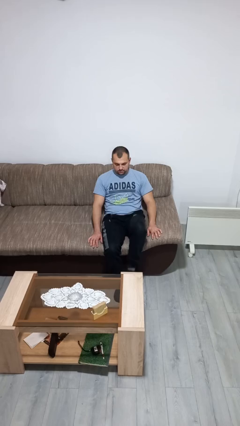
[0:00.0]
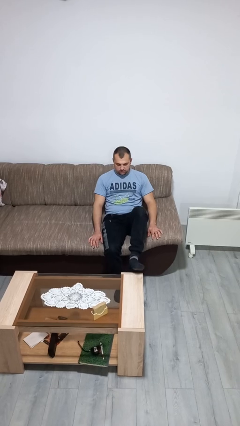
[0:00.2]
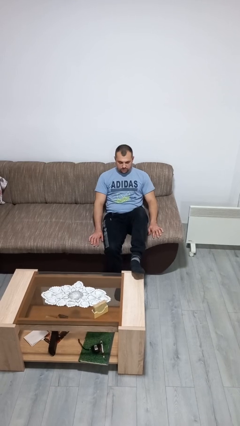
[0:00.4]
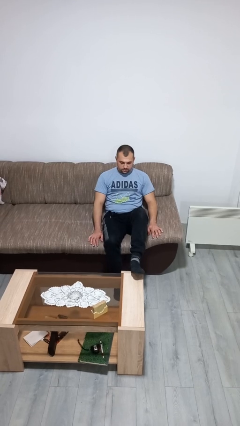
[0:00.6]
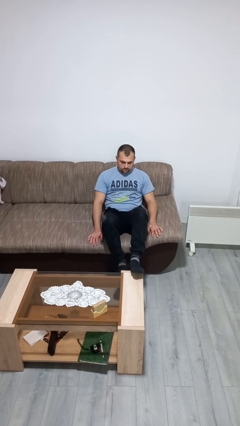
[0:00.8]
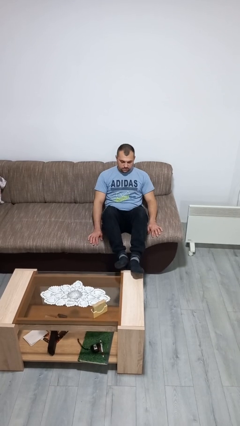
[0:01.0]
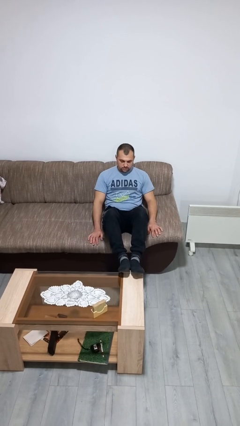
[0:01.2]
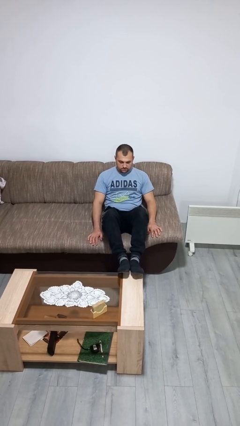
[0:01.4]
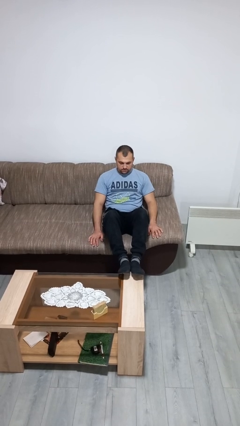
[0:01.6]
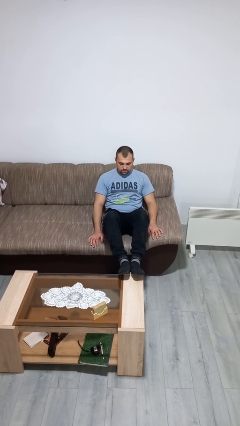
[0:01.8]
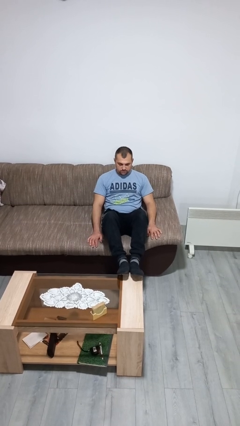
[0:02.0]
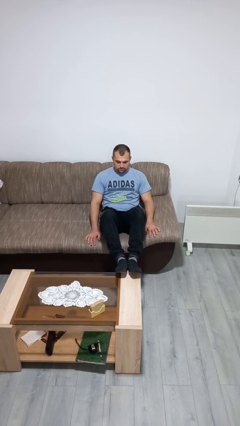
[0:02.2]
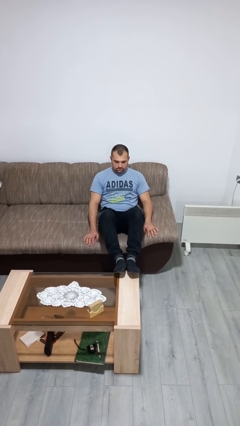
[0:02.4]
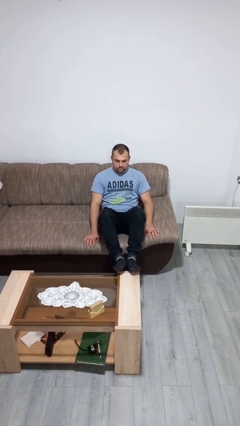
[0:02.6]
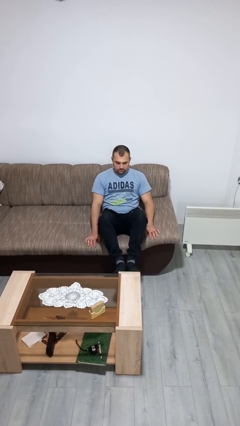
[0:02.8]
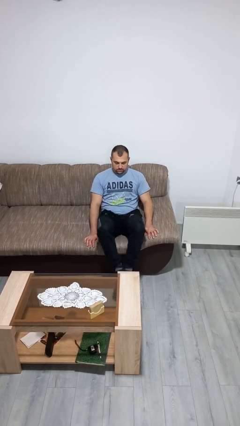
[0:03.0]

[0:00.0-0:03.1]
person puts feet up

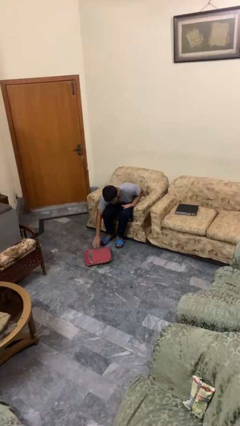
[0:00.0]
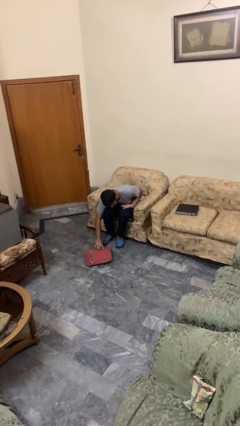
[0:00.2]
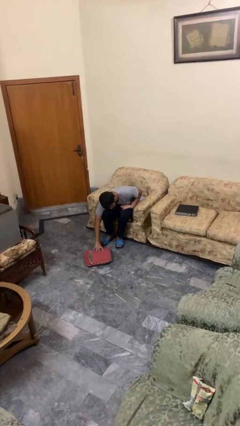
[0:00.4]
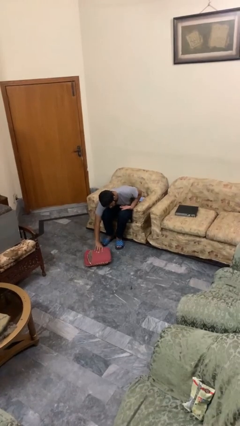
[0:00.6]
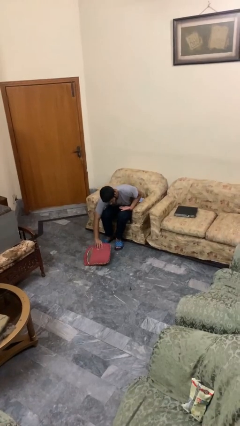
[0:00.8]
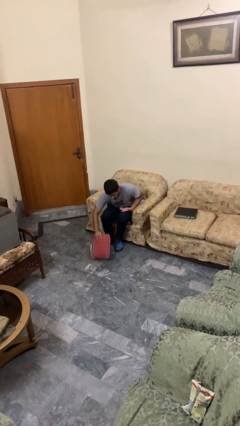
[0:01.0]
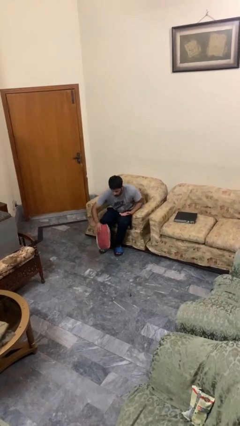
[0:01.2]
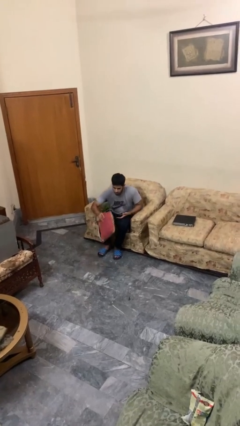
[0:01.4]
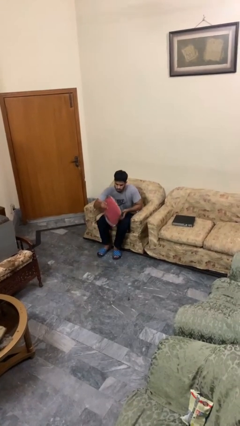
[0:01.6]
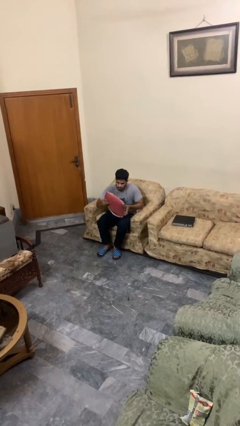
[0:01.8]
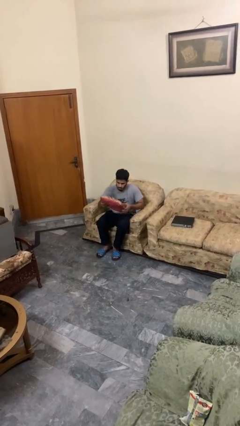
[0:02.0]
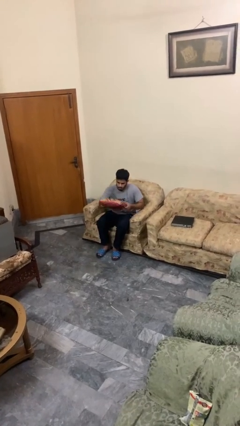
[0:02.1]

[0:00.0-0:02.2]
person picks up object from floor

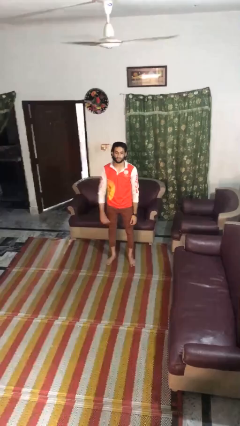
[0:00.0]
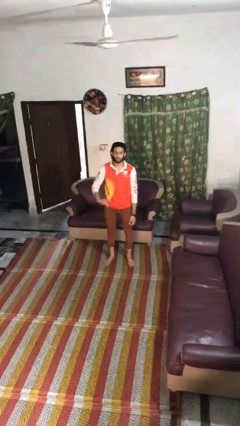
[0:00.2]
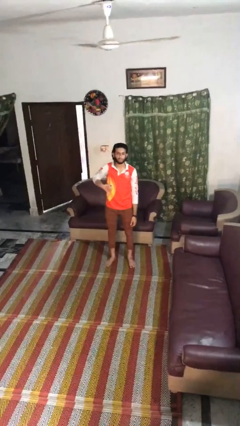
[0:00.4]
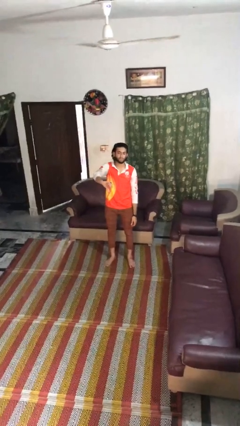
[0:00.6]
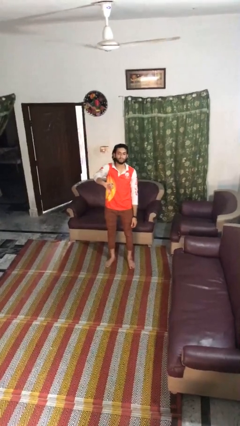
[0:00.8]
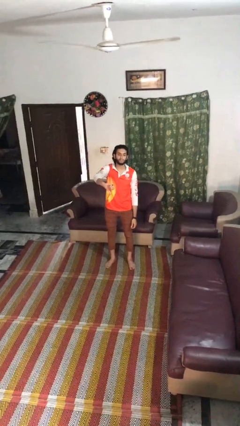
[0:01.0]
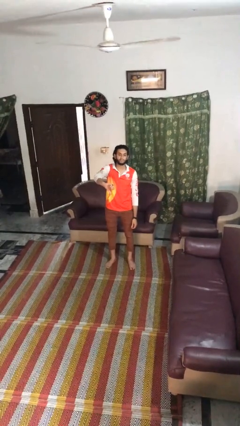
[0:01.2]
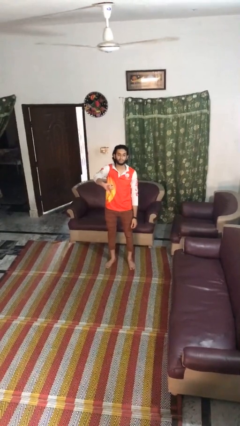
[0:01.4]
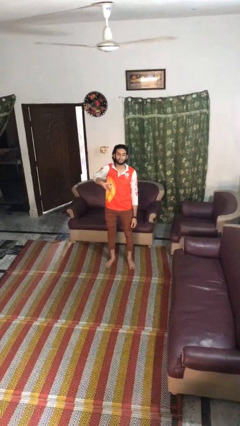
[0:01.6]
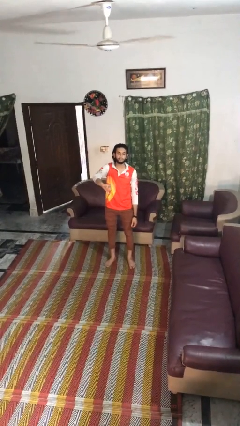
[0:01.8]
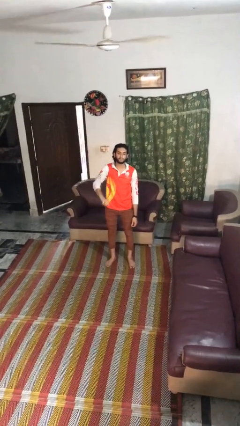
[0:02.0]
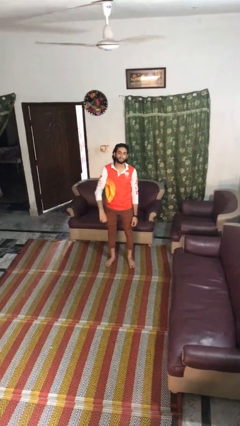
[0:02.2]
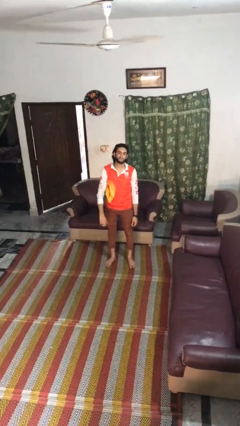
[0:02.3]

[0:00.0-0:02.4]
person gestures thumbs down

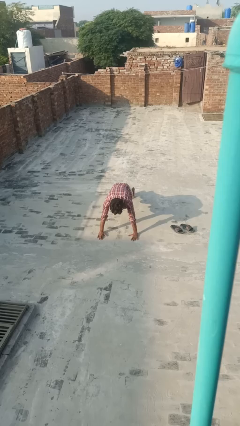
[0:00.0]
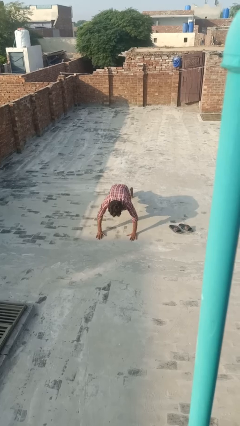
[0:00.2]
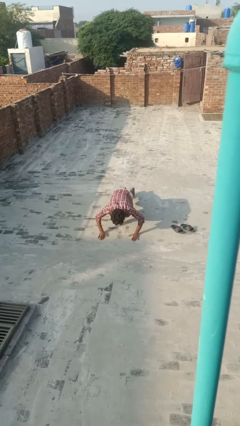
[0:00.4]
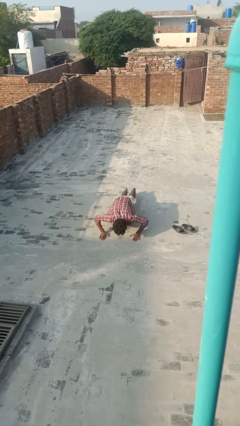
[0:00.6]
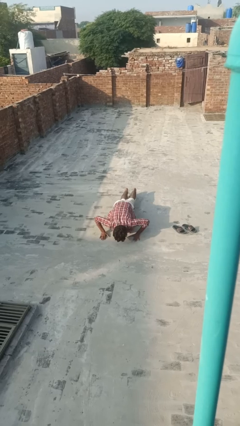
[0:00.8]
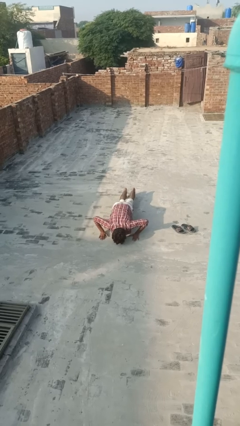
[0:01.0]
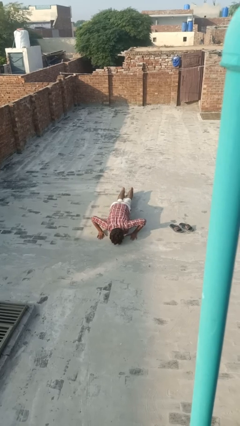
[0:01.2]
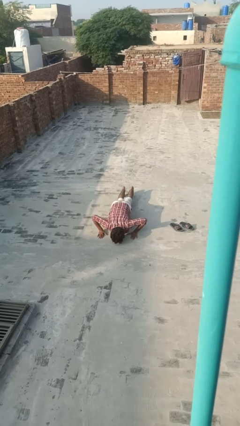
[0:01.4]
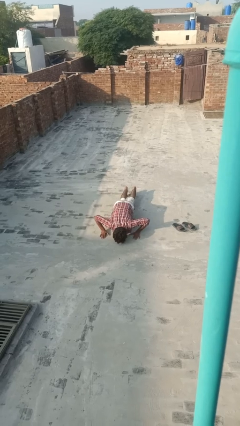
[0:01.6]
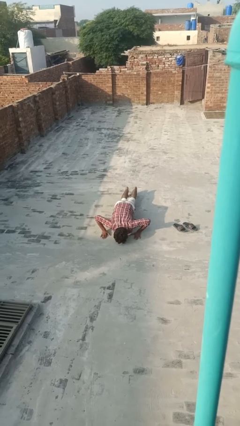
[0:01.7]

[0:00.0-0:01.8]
person exercises with pushup

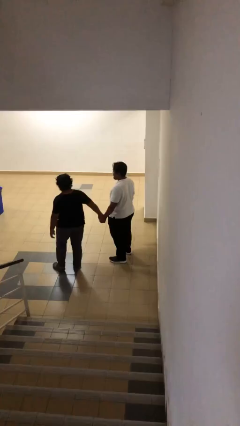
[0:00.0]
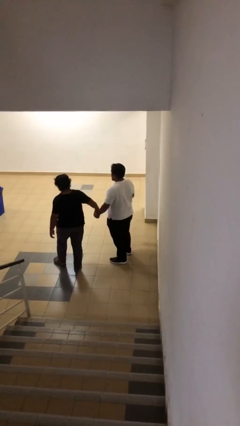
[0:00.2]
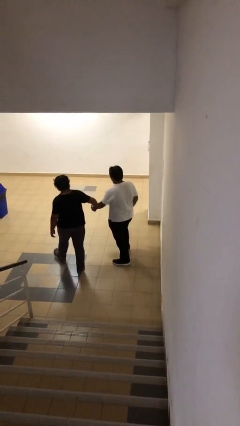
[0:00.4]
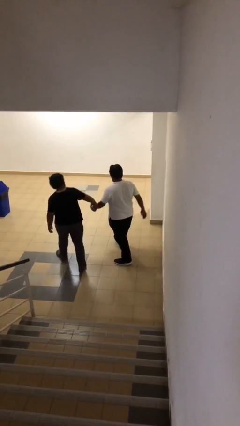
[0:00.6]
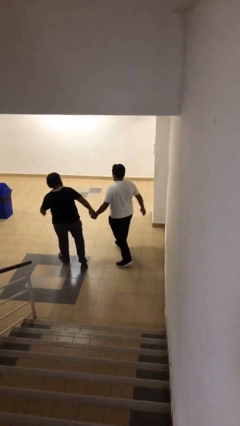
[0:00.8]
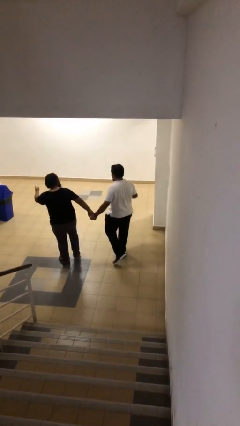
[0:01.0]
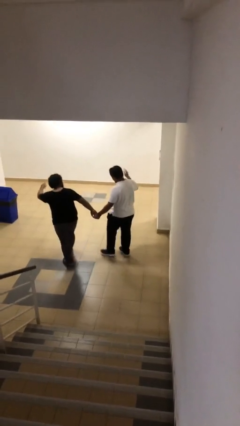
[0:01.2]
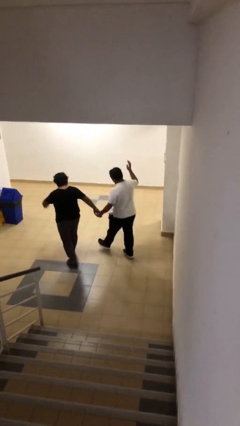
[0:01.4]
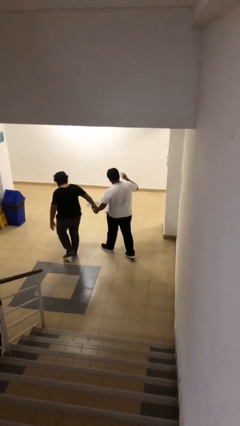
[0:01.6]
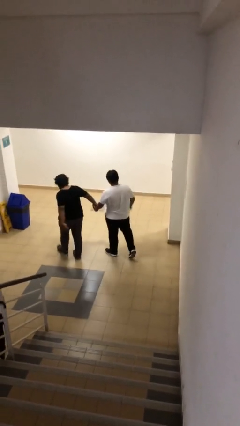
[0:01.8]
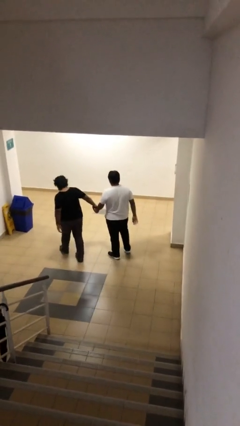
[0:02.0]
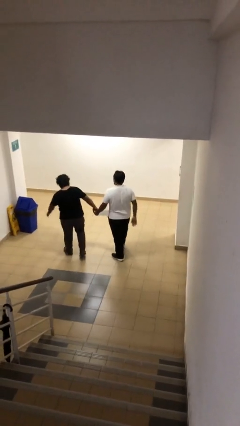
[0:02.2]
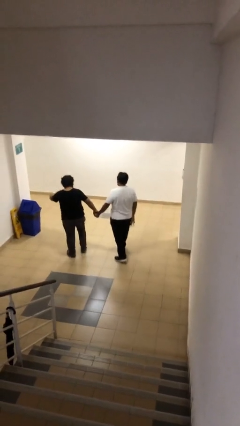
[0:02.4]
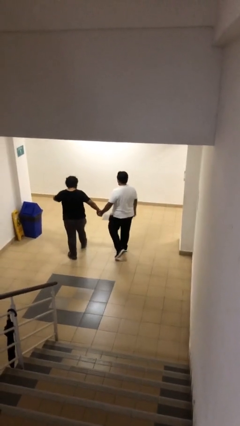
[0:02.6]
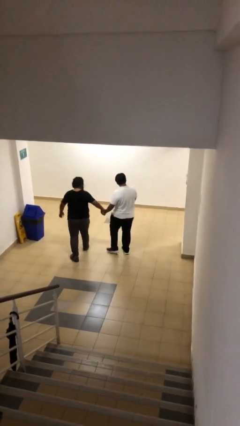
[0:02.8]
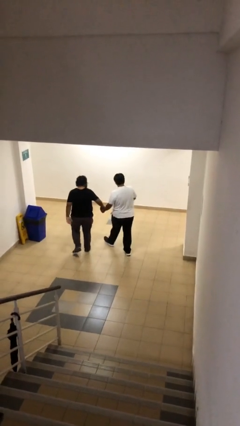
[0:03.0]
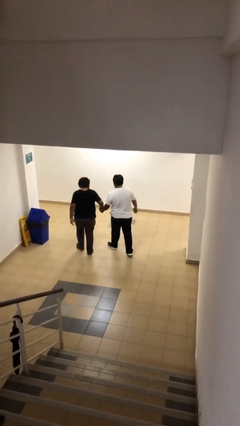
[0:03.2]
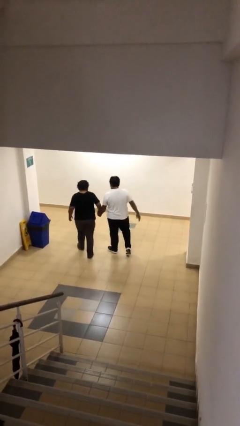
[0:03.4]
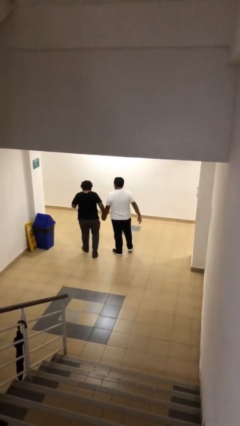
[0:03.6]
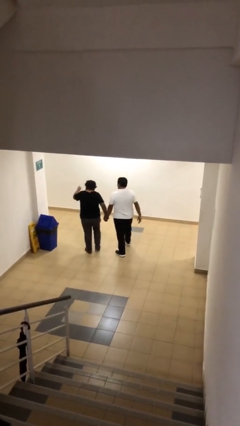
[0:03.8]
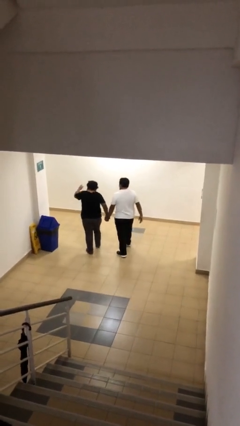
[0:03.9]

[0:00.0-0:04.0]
person holds hand

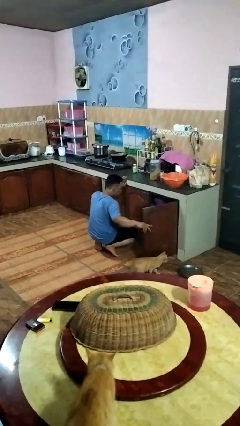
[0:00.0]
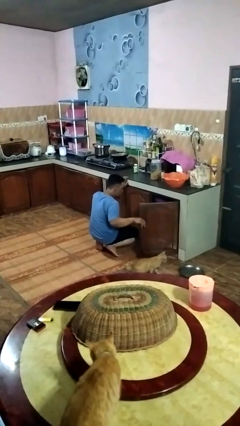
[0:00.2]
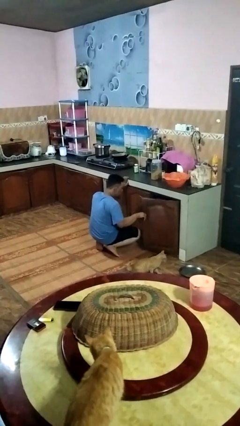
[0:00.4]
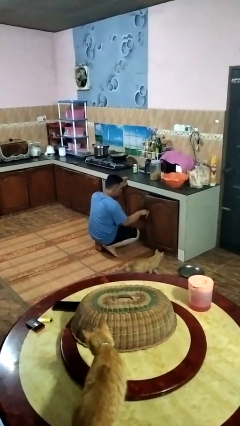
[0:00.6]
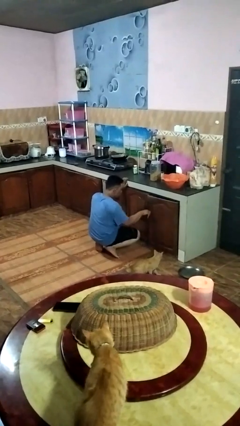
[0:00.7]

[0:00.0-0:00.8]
person closes kitchen drawer

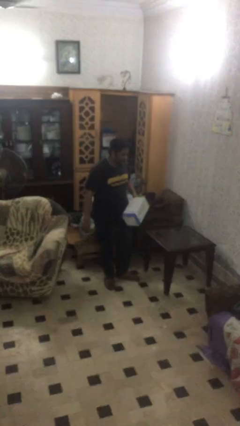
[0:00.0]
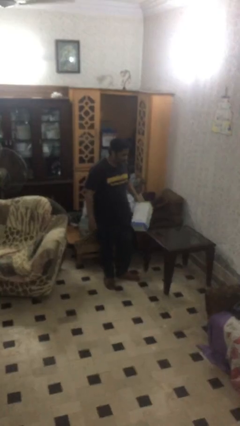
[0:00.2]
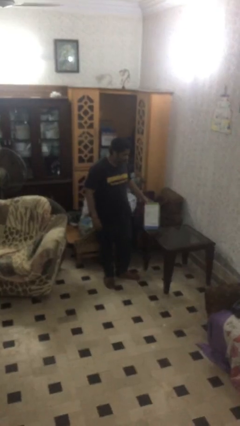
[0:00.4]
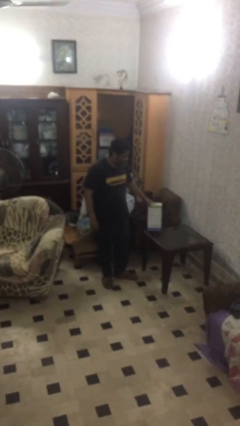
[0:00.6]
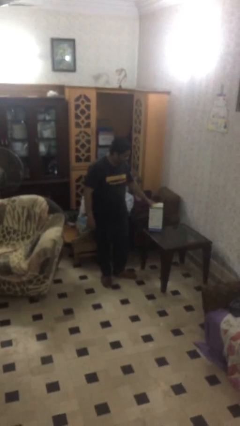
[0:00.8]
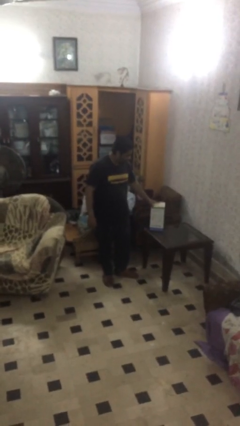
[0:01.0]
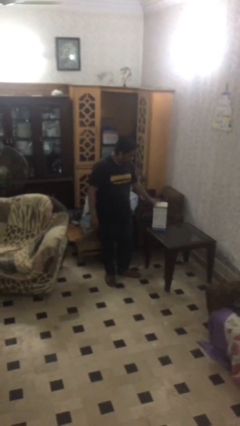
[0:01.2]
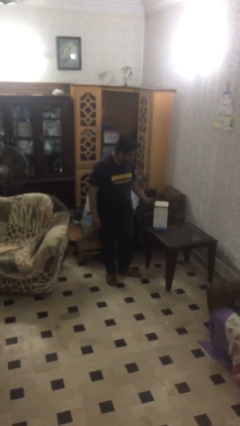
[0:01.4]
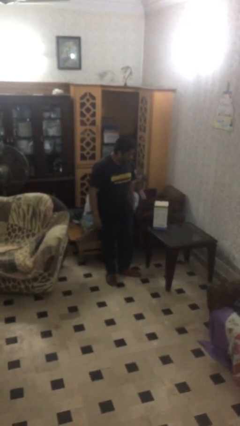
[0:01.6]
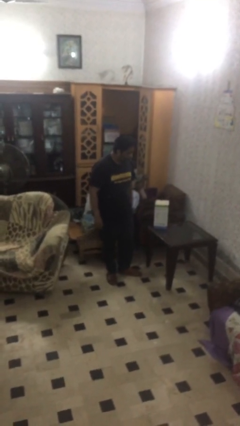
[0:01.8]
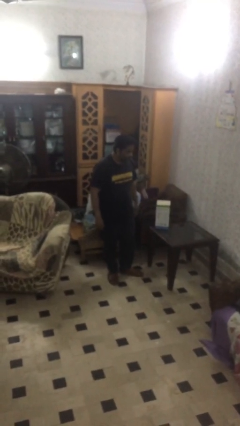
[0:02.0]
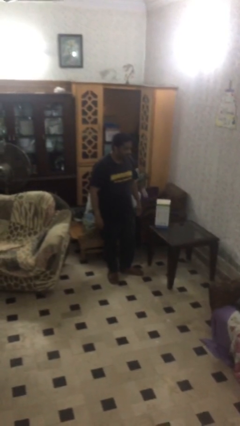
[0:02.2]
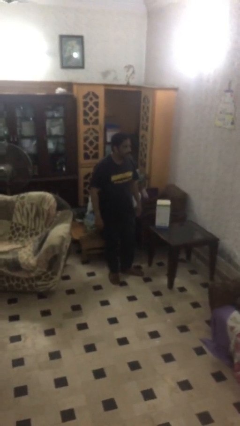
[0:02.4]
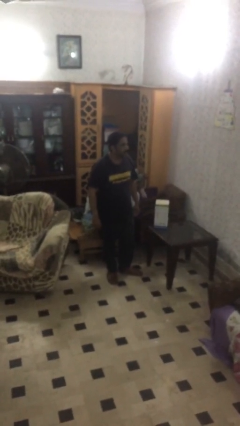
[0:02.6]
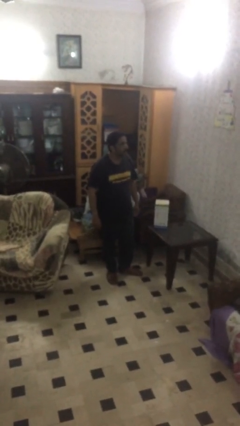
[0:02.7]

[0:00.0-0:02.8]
person puts down object on table

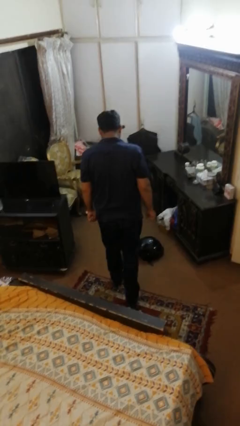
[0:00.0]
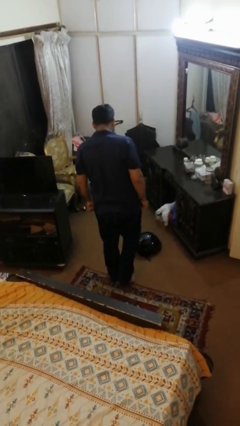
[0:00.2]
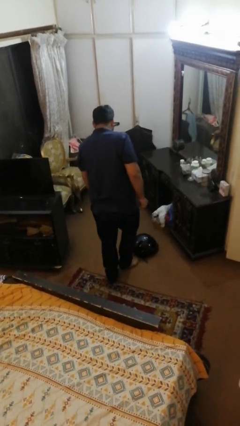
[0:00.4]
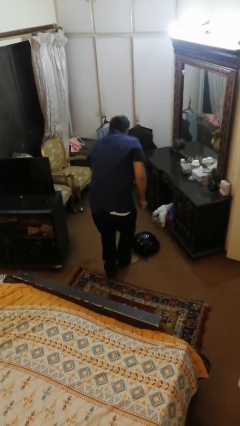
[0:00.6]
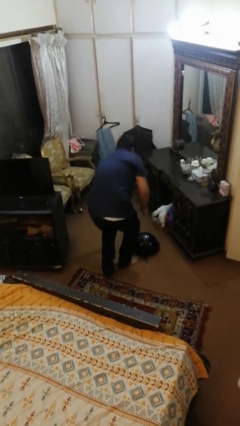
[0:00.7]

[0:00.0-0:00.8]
person trips on object on floor
